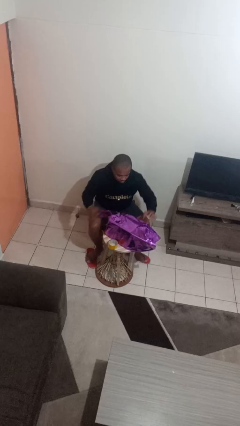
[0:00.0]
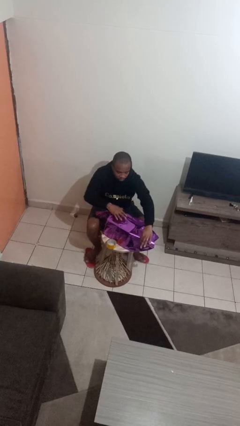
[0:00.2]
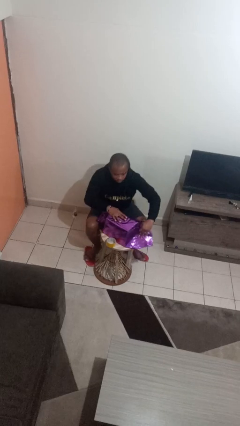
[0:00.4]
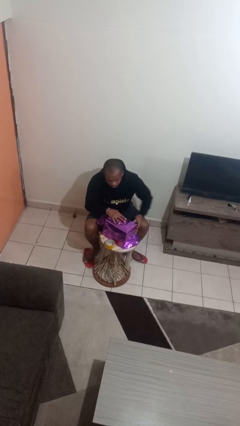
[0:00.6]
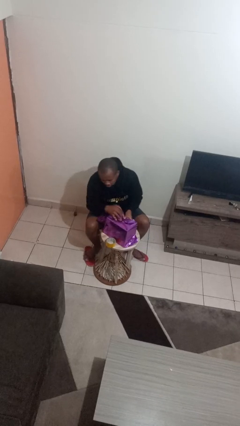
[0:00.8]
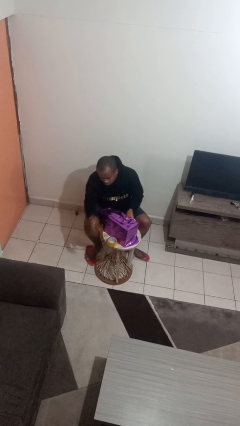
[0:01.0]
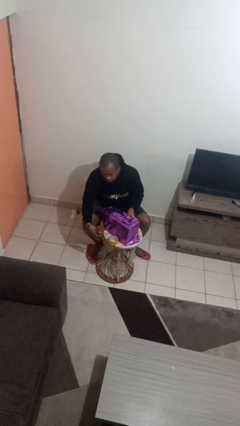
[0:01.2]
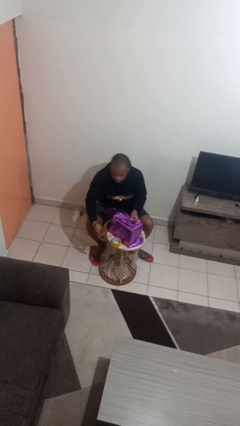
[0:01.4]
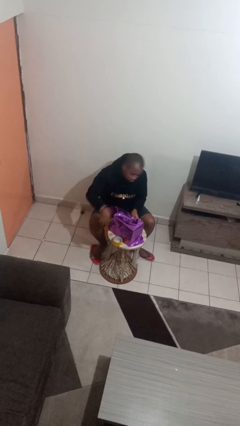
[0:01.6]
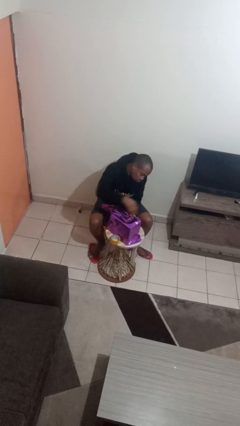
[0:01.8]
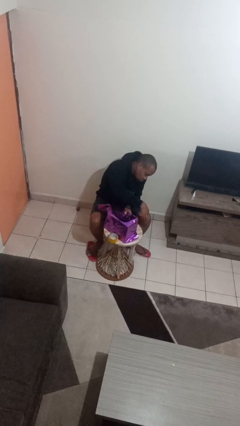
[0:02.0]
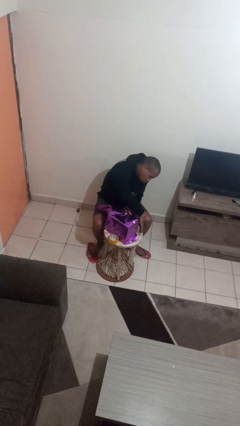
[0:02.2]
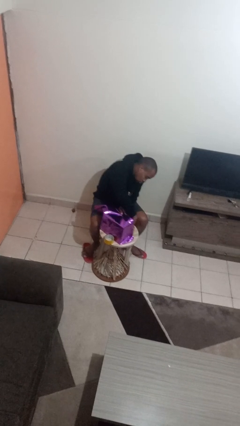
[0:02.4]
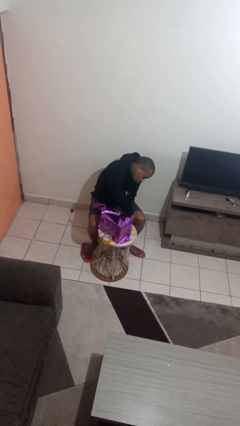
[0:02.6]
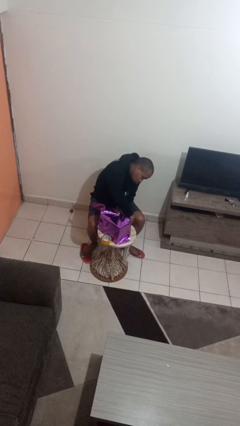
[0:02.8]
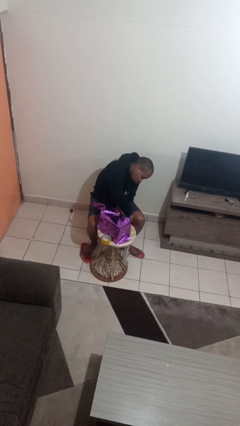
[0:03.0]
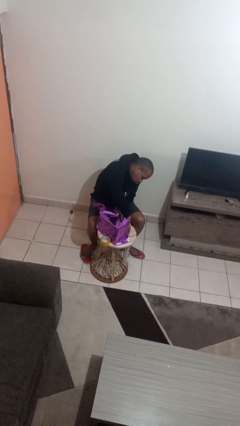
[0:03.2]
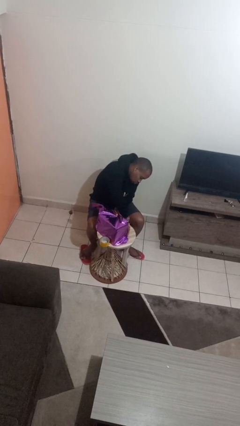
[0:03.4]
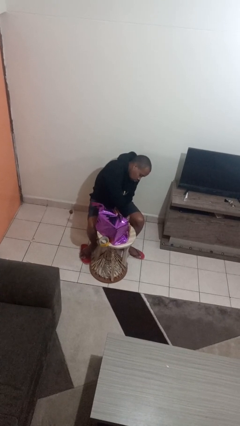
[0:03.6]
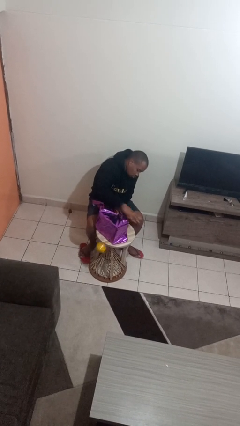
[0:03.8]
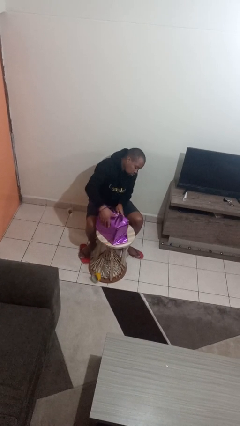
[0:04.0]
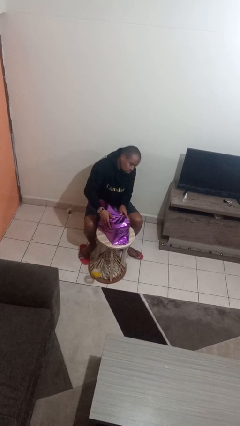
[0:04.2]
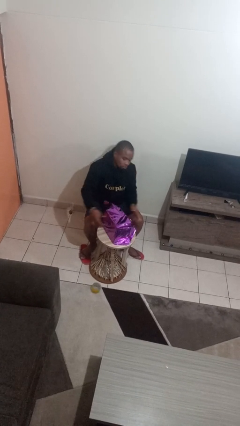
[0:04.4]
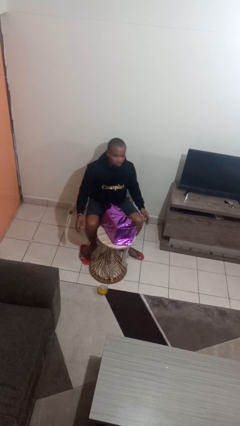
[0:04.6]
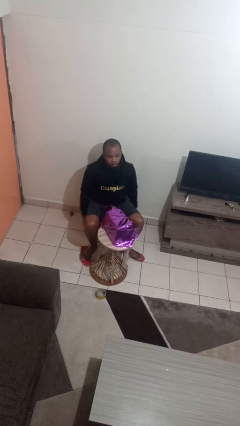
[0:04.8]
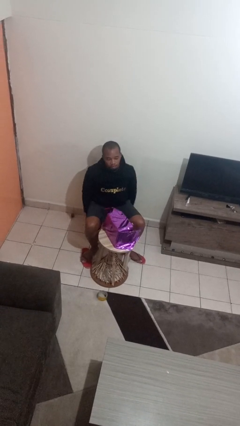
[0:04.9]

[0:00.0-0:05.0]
person wraps box

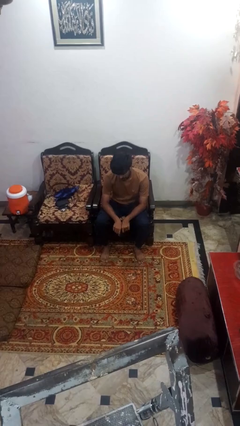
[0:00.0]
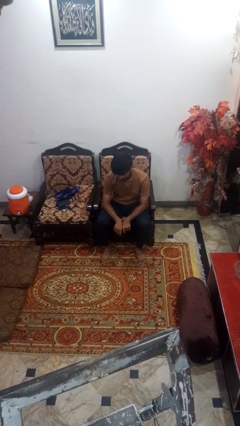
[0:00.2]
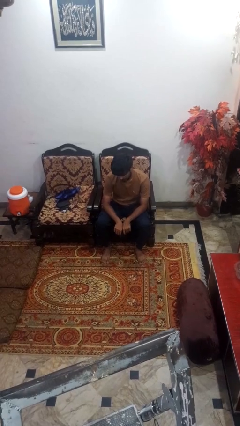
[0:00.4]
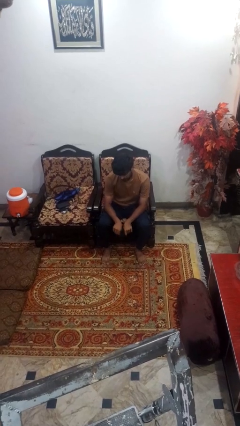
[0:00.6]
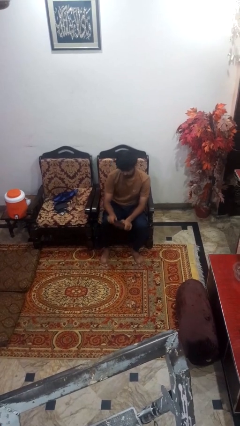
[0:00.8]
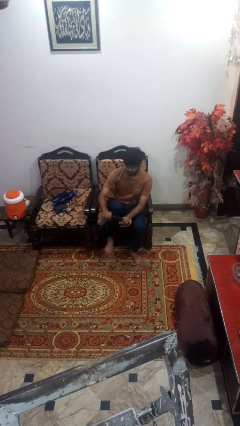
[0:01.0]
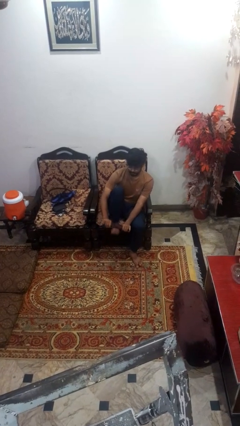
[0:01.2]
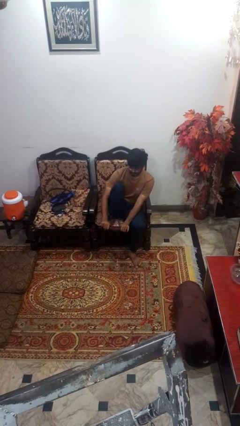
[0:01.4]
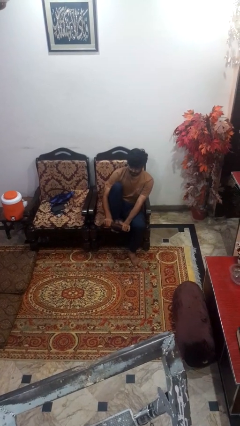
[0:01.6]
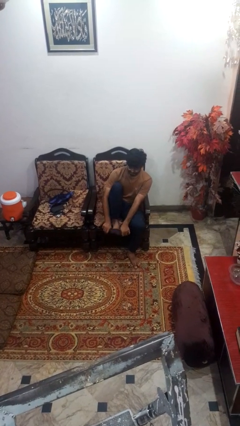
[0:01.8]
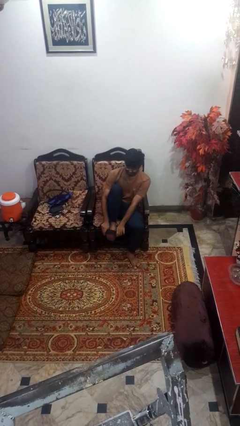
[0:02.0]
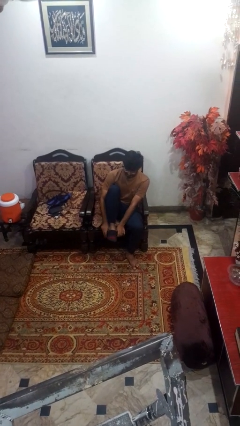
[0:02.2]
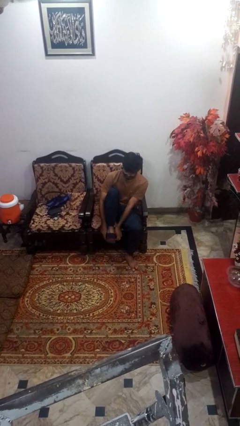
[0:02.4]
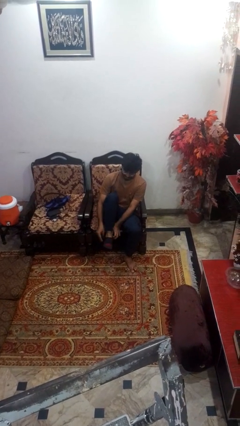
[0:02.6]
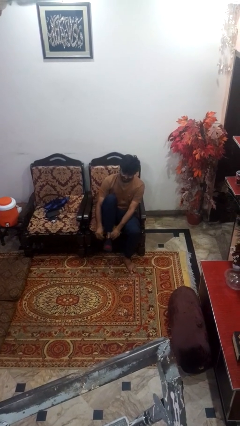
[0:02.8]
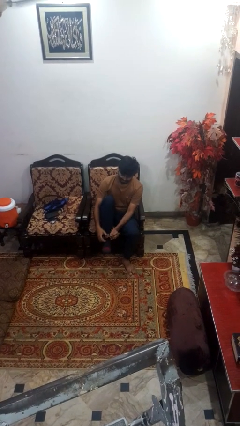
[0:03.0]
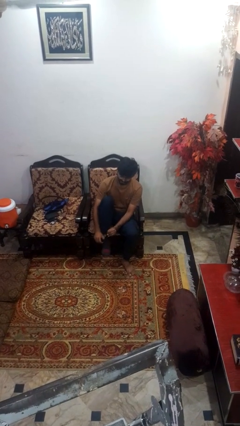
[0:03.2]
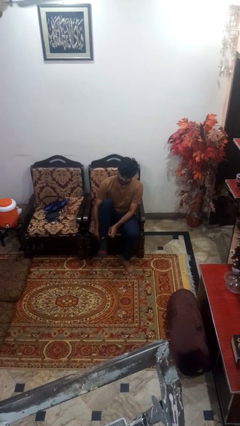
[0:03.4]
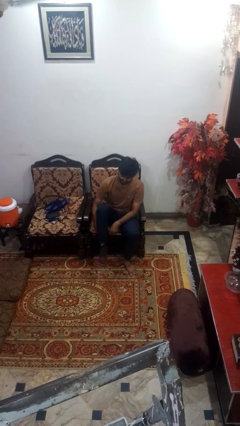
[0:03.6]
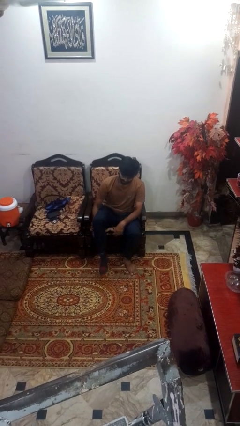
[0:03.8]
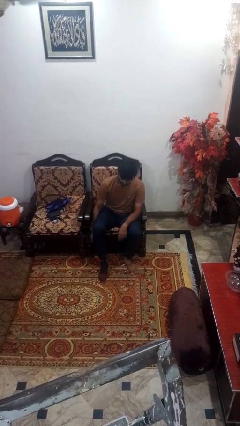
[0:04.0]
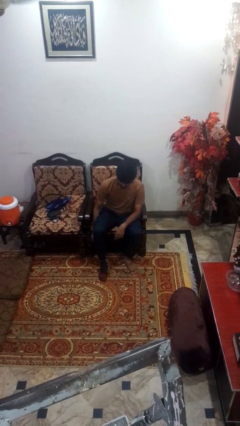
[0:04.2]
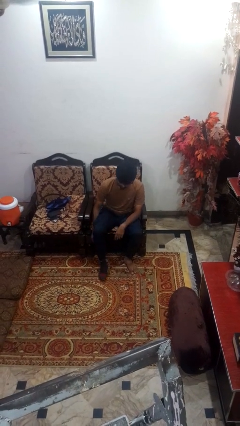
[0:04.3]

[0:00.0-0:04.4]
person puts on socks

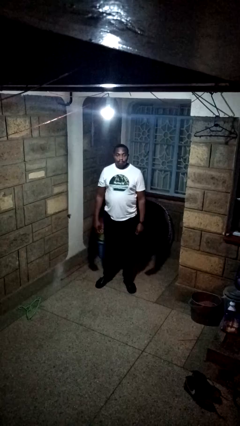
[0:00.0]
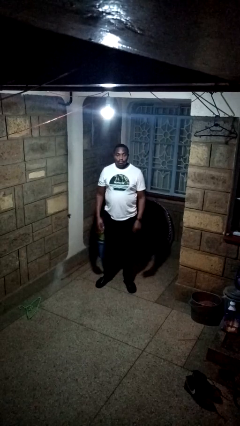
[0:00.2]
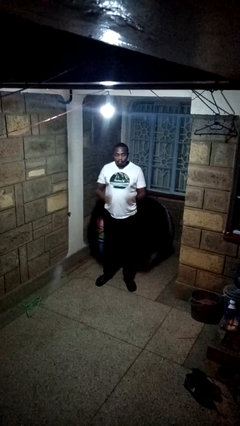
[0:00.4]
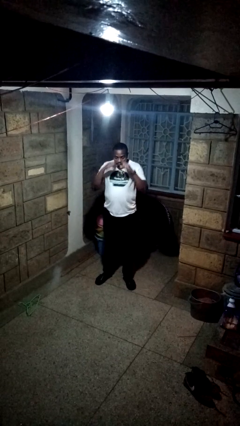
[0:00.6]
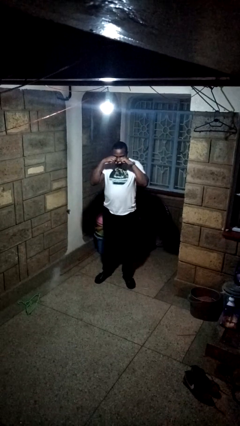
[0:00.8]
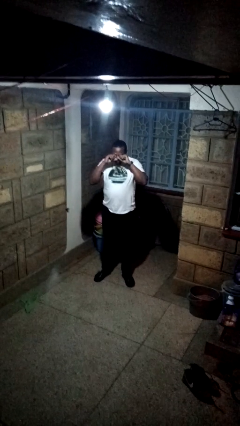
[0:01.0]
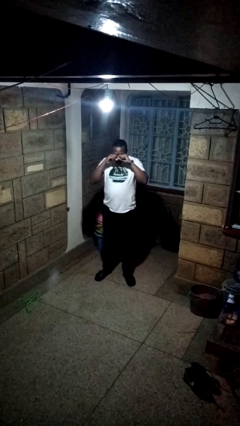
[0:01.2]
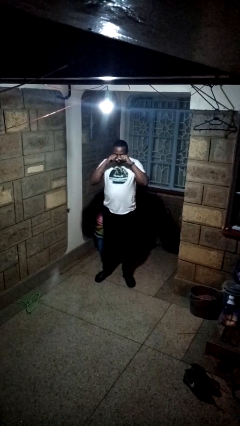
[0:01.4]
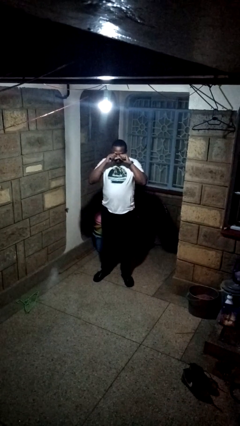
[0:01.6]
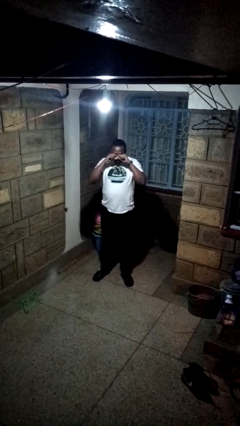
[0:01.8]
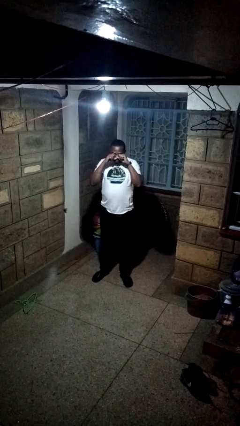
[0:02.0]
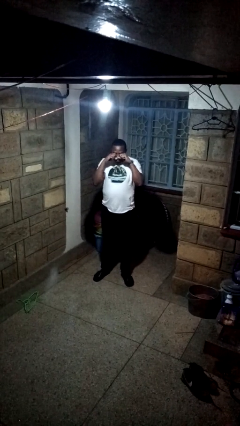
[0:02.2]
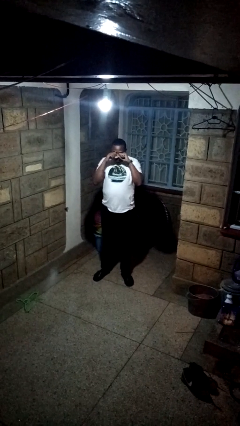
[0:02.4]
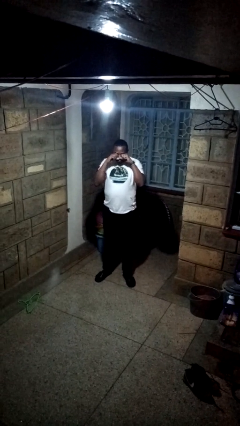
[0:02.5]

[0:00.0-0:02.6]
person rubs eyes

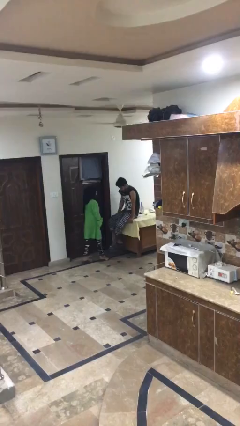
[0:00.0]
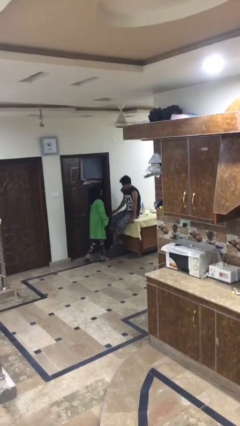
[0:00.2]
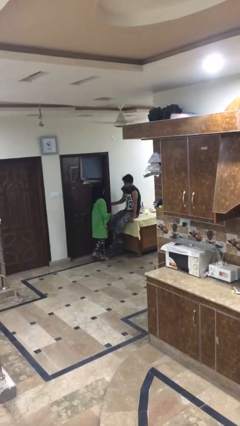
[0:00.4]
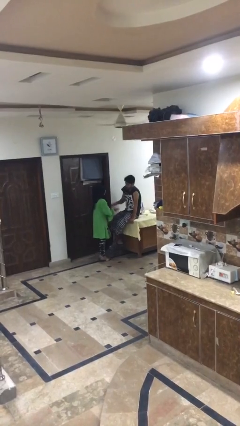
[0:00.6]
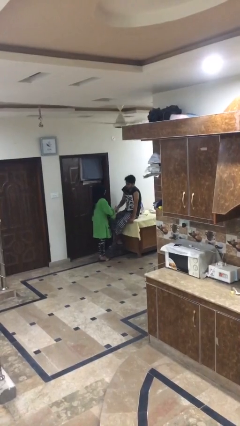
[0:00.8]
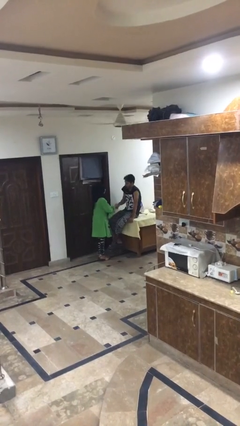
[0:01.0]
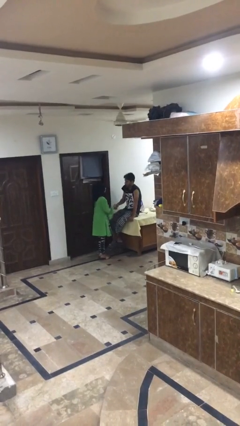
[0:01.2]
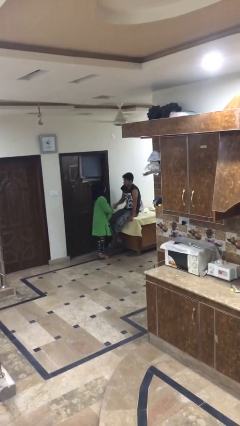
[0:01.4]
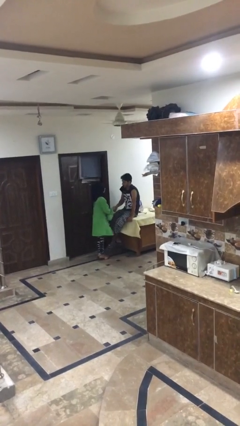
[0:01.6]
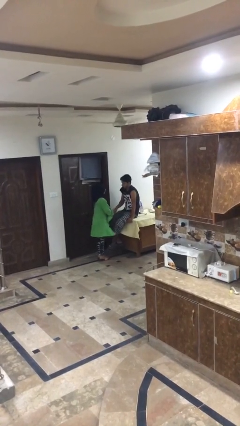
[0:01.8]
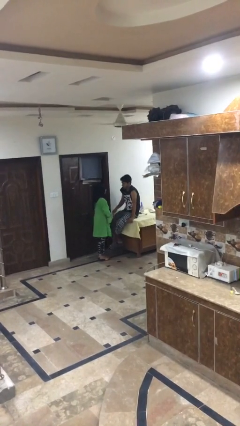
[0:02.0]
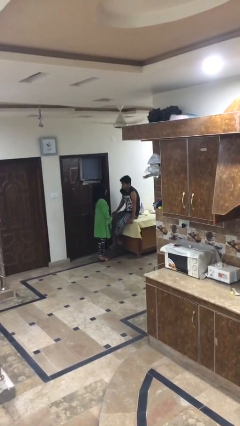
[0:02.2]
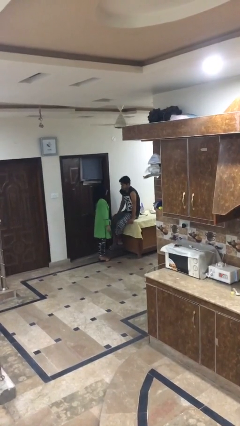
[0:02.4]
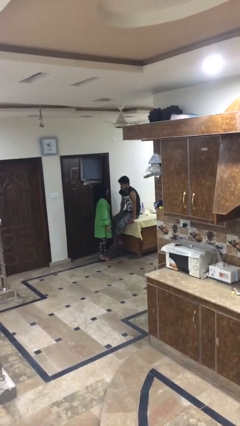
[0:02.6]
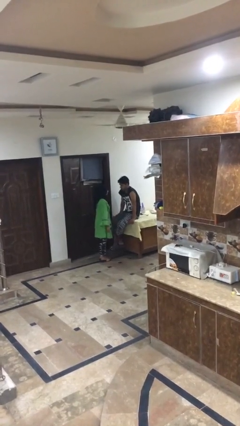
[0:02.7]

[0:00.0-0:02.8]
person shakes hand

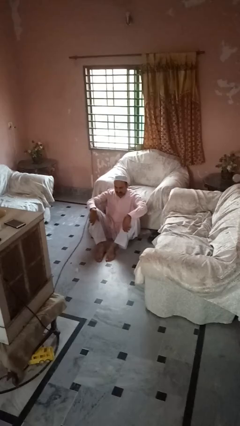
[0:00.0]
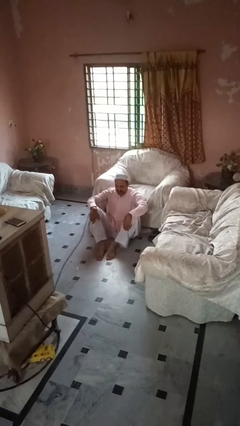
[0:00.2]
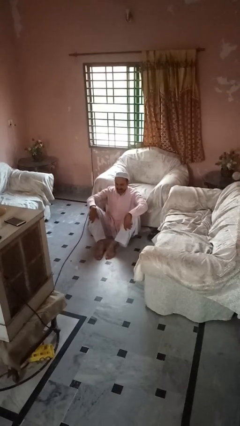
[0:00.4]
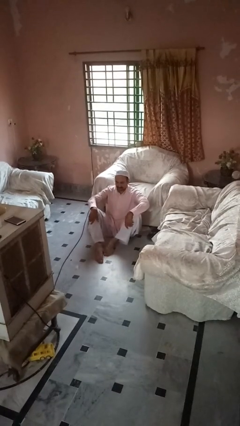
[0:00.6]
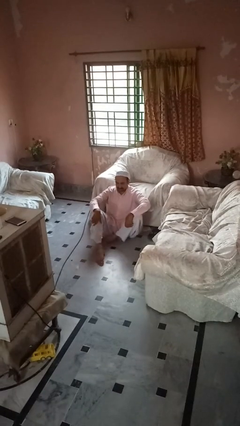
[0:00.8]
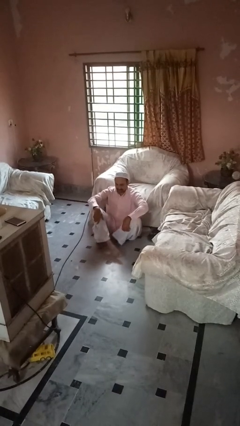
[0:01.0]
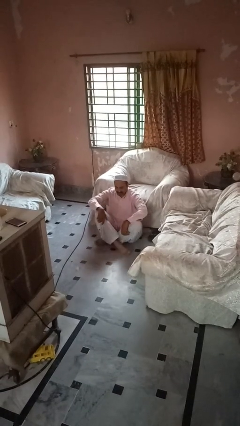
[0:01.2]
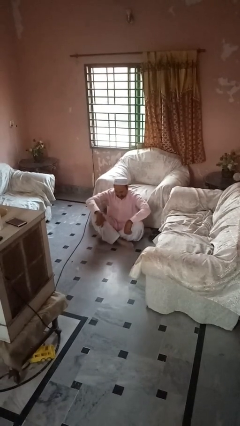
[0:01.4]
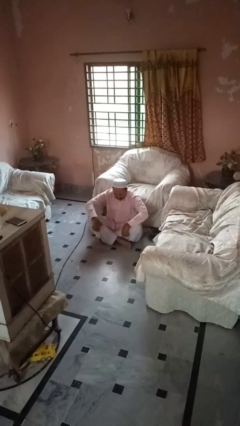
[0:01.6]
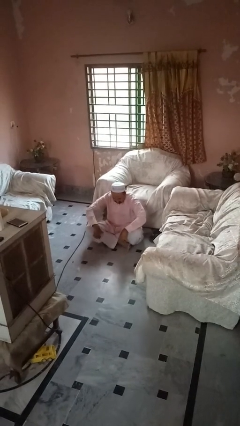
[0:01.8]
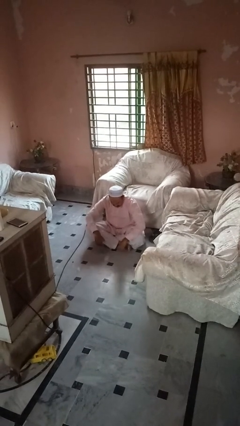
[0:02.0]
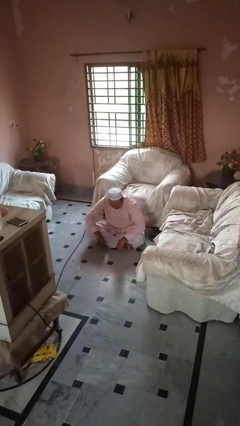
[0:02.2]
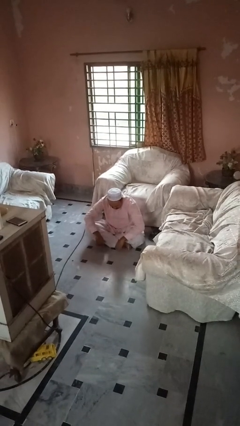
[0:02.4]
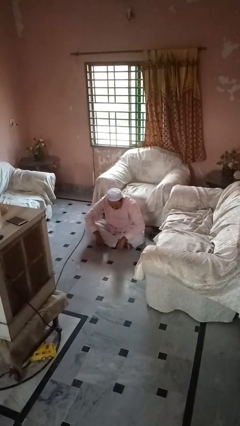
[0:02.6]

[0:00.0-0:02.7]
person crosses legs

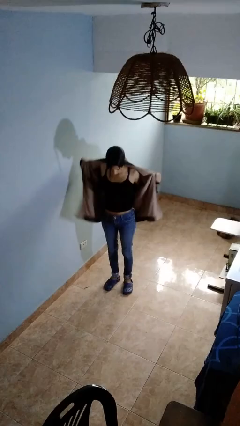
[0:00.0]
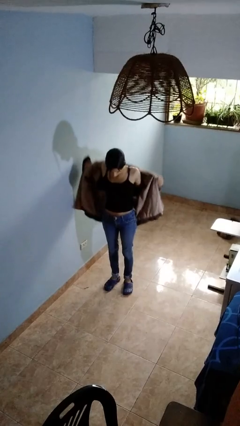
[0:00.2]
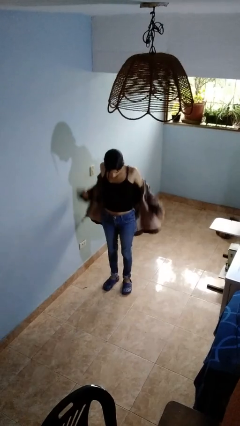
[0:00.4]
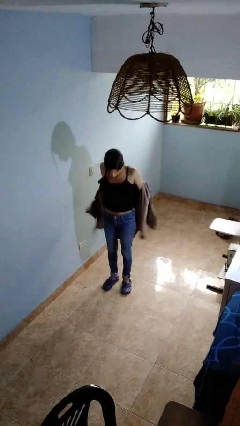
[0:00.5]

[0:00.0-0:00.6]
person takes off jacket
